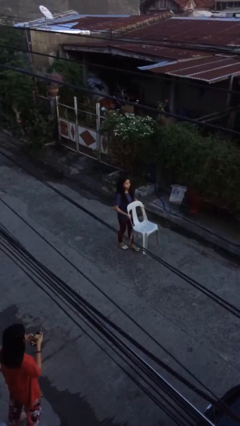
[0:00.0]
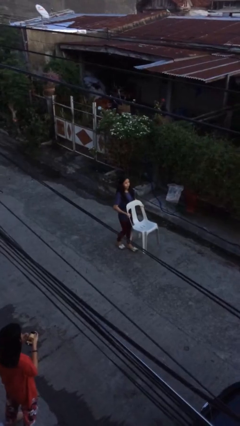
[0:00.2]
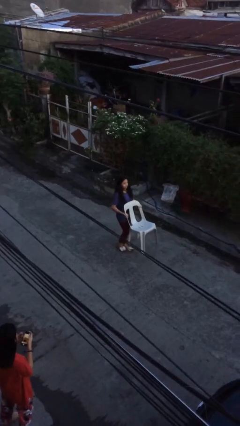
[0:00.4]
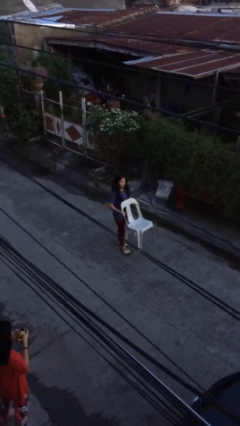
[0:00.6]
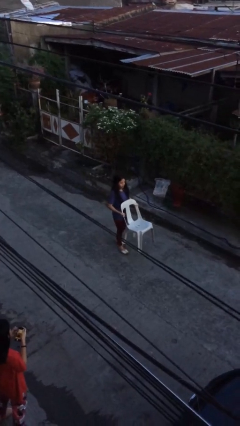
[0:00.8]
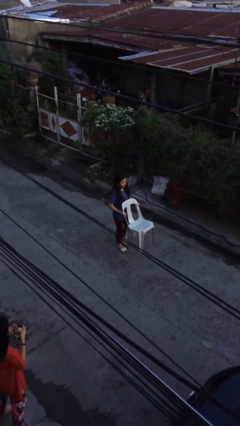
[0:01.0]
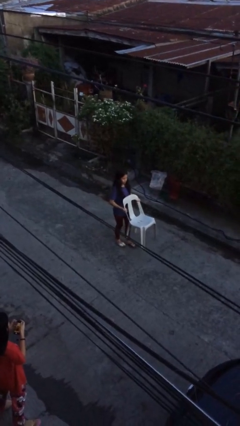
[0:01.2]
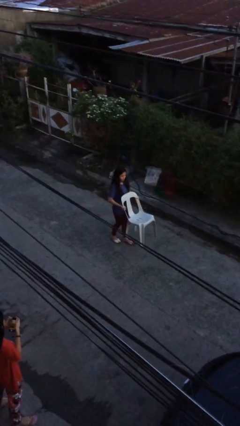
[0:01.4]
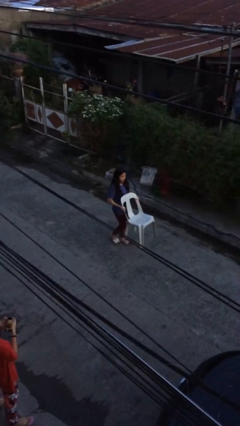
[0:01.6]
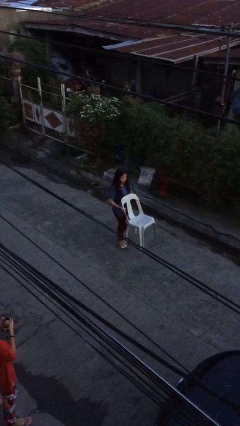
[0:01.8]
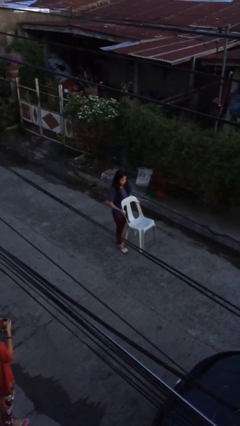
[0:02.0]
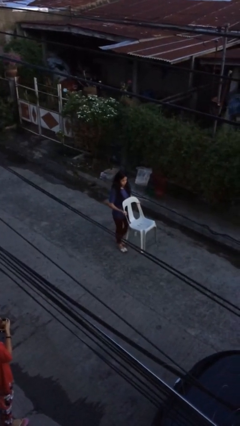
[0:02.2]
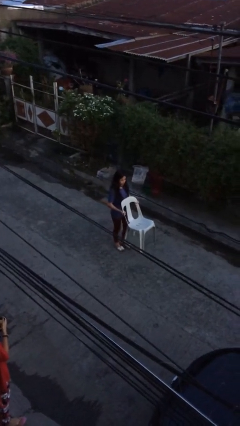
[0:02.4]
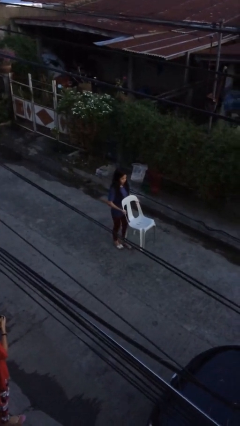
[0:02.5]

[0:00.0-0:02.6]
person carries heavy object

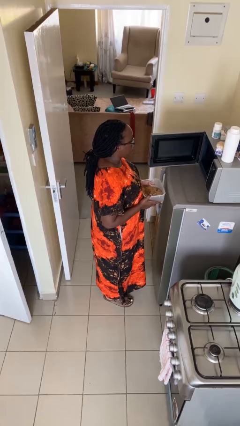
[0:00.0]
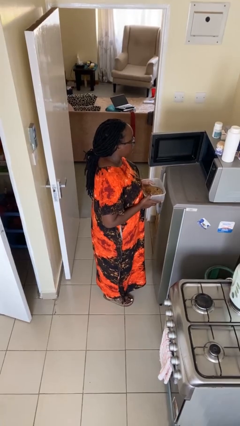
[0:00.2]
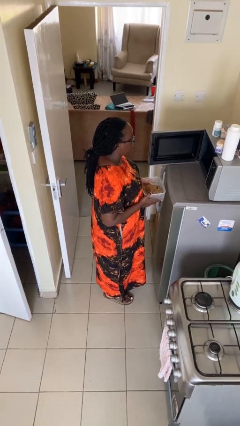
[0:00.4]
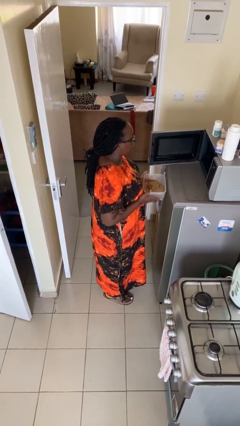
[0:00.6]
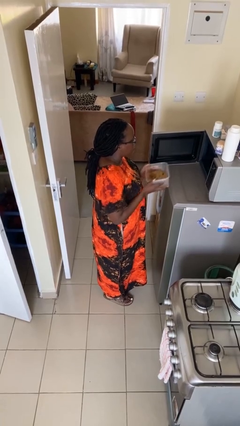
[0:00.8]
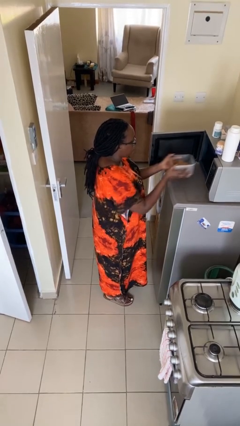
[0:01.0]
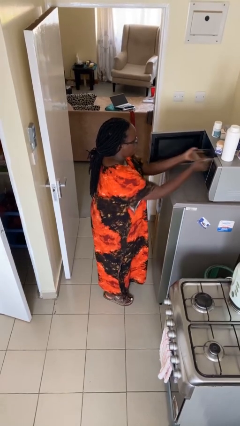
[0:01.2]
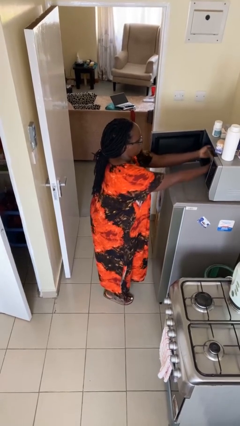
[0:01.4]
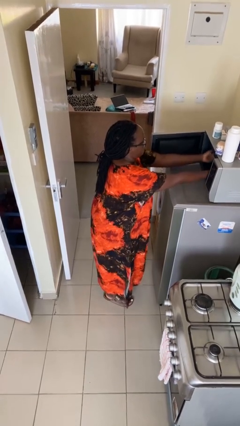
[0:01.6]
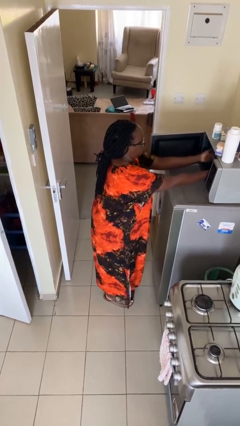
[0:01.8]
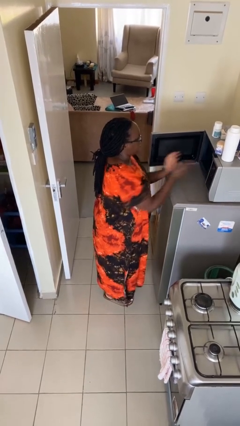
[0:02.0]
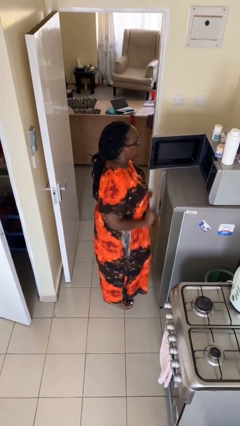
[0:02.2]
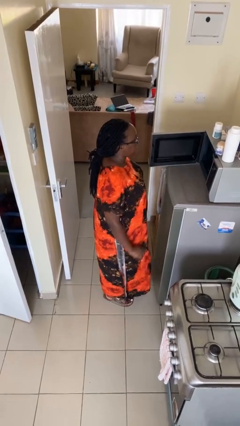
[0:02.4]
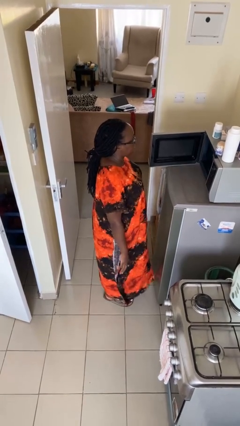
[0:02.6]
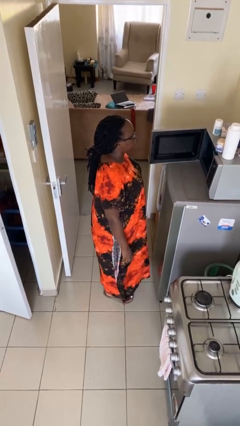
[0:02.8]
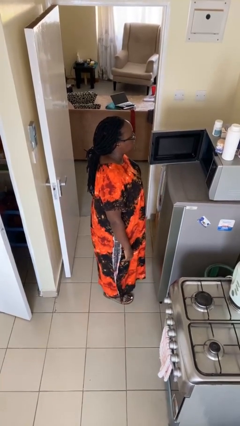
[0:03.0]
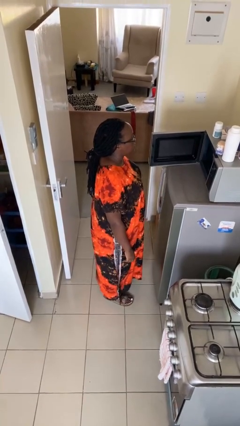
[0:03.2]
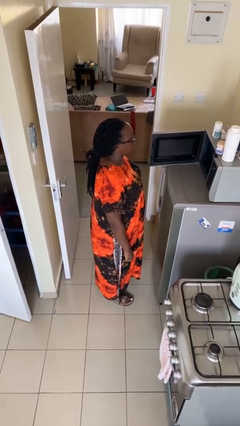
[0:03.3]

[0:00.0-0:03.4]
person puts object into microwave

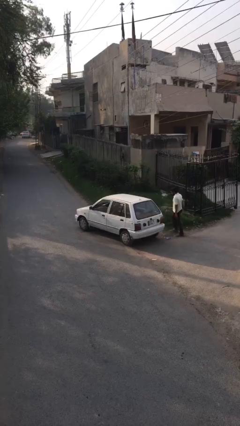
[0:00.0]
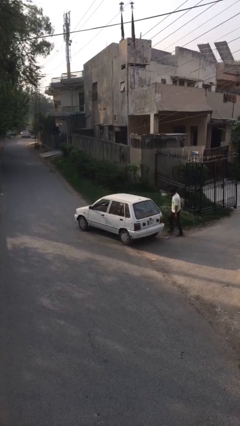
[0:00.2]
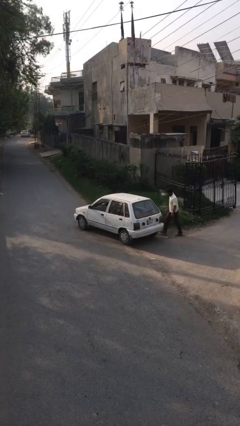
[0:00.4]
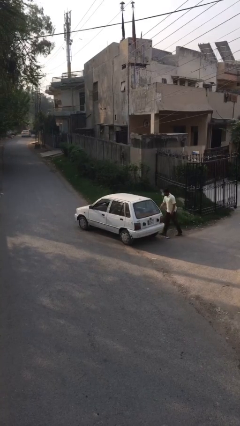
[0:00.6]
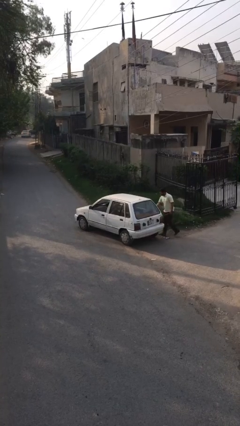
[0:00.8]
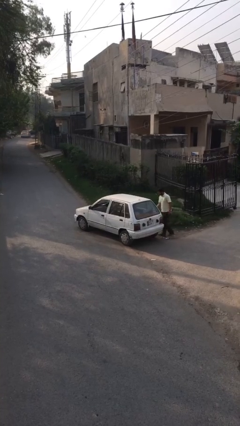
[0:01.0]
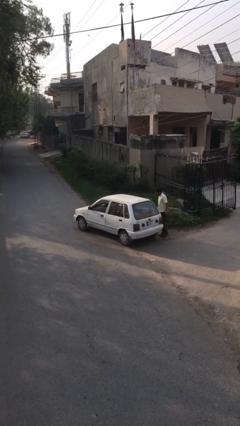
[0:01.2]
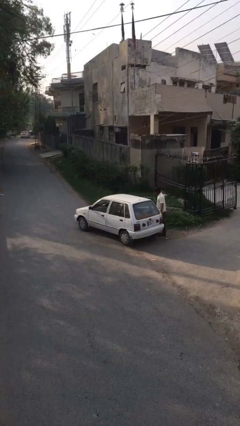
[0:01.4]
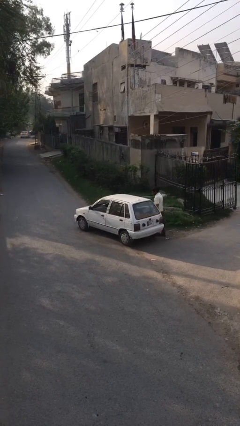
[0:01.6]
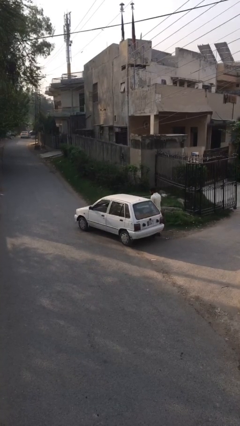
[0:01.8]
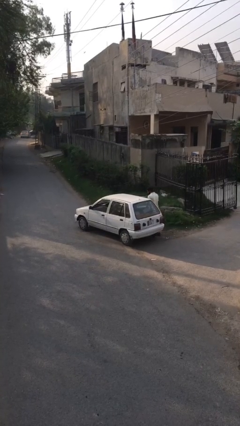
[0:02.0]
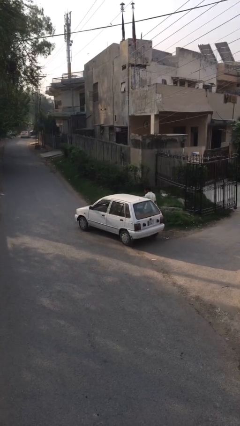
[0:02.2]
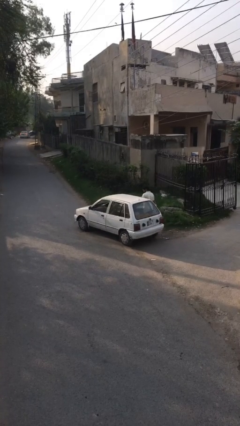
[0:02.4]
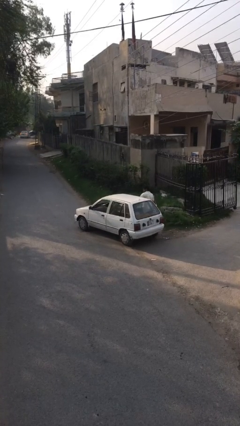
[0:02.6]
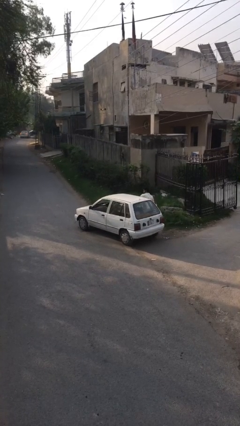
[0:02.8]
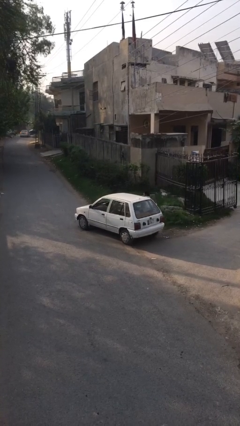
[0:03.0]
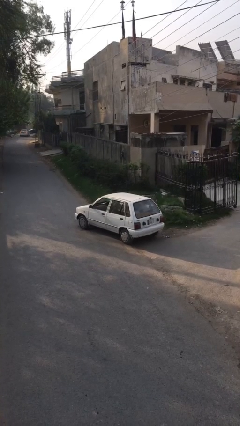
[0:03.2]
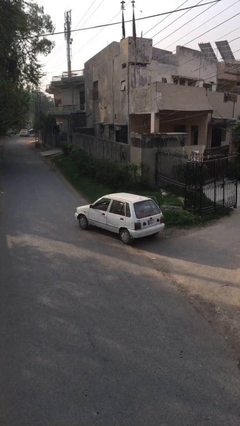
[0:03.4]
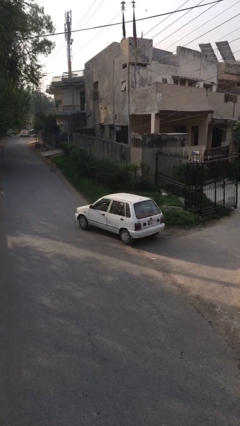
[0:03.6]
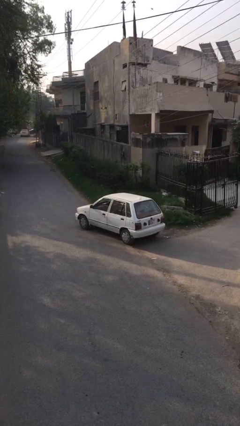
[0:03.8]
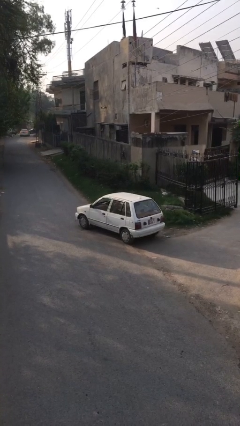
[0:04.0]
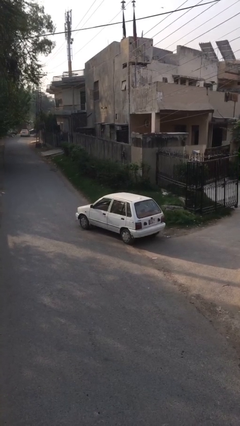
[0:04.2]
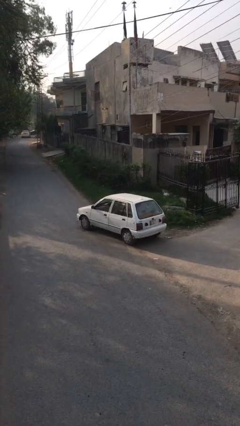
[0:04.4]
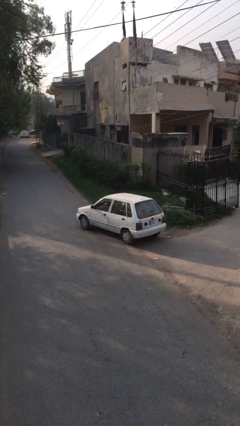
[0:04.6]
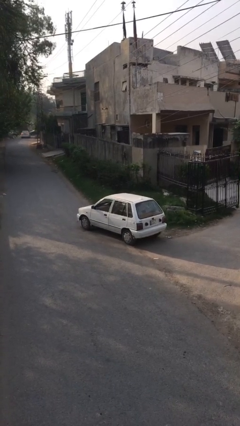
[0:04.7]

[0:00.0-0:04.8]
car picks up person

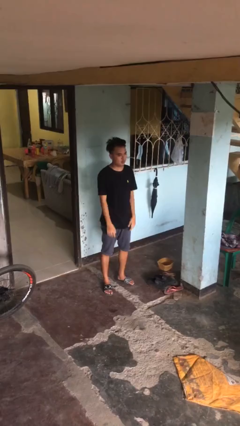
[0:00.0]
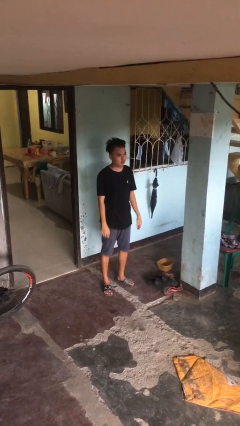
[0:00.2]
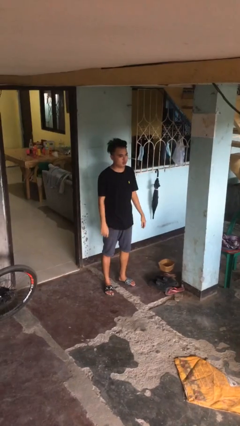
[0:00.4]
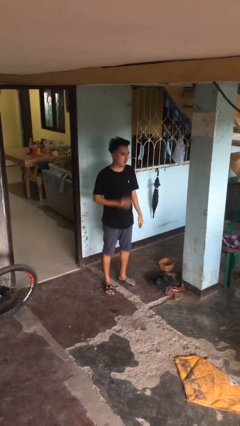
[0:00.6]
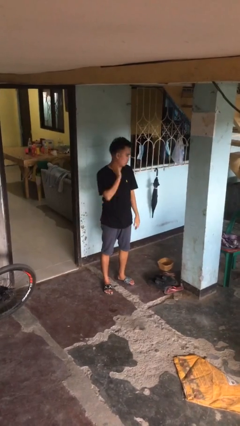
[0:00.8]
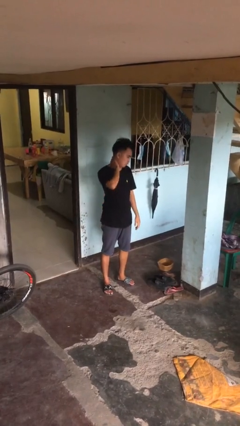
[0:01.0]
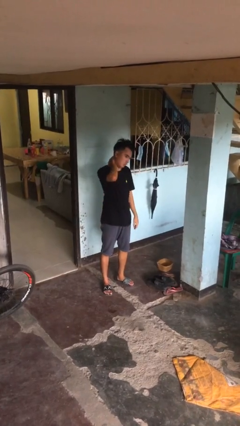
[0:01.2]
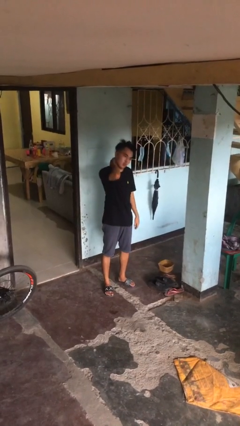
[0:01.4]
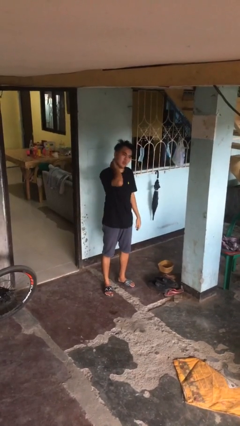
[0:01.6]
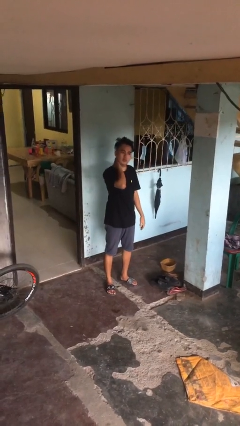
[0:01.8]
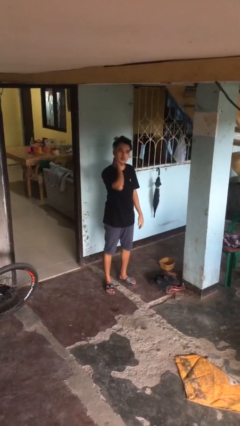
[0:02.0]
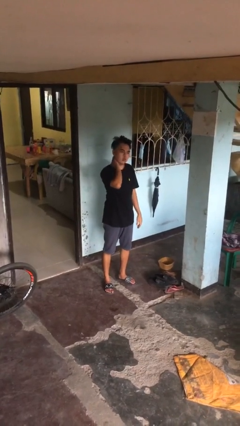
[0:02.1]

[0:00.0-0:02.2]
person rubs neck

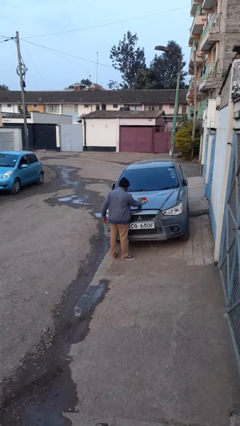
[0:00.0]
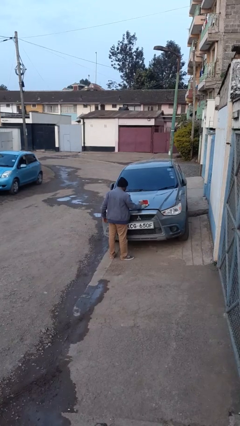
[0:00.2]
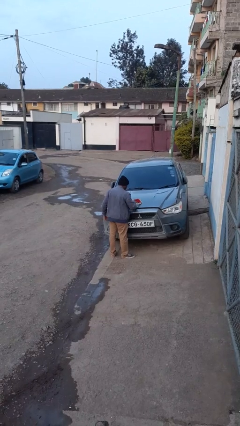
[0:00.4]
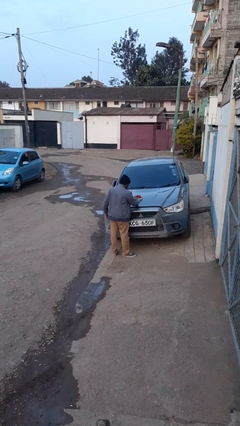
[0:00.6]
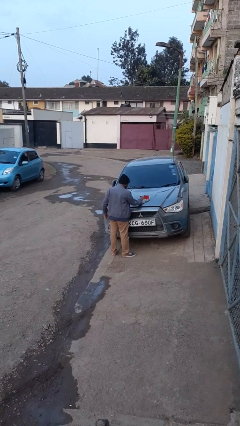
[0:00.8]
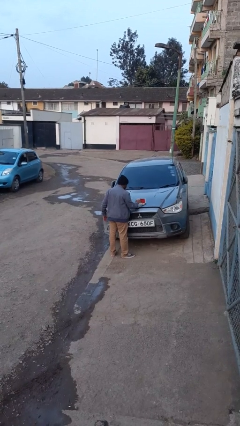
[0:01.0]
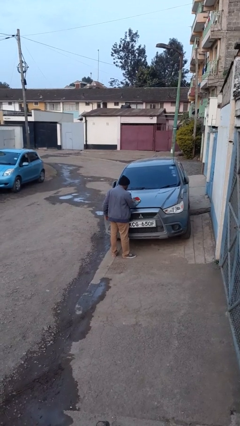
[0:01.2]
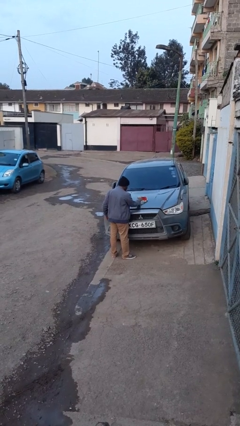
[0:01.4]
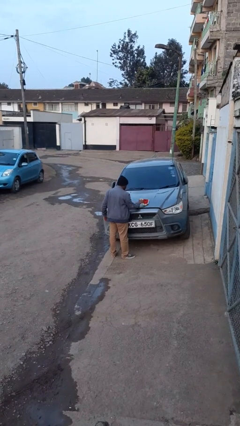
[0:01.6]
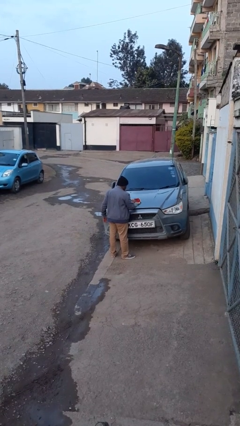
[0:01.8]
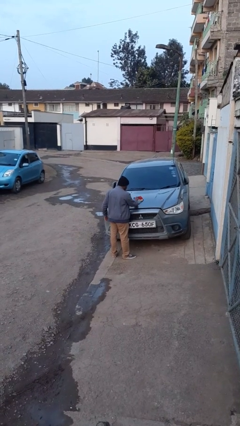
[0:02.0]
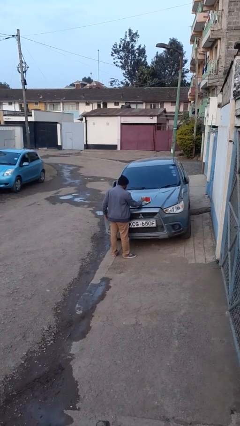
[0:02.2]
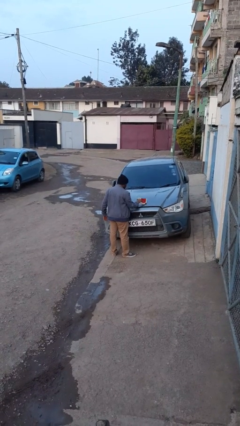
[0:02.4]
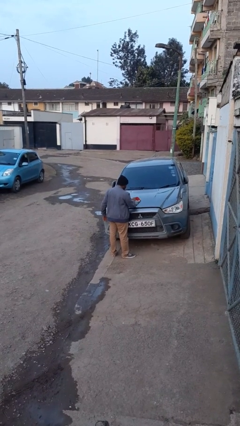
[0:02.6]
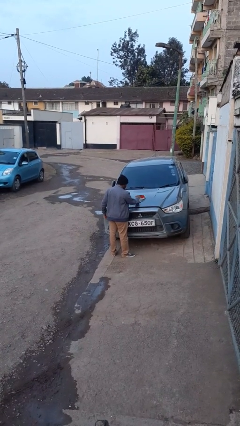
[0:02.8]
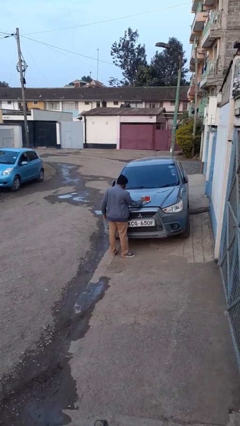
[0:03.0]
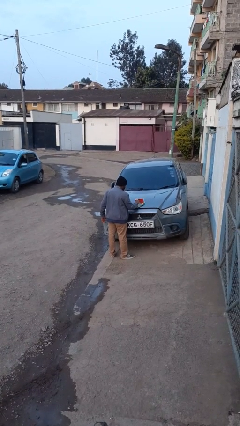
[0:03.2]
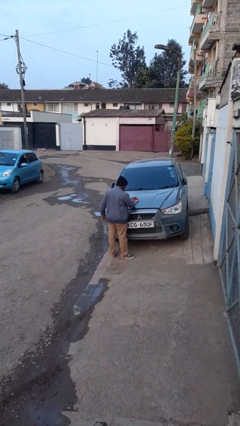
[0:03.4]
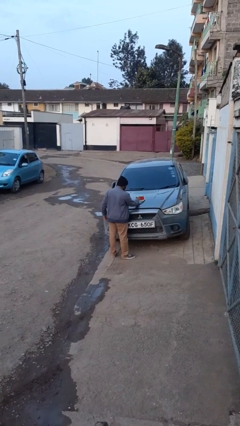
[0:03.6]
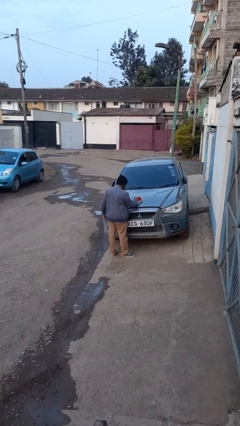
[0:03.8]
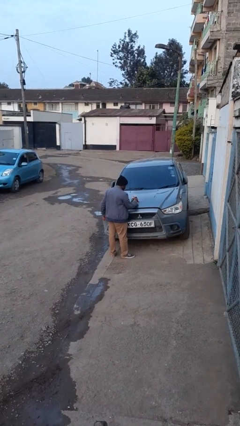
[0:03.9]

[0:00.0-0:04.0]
person polishes car with rag

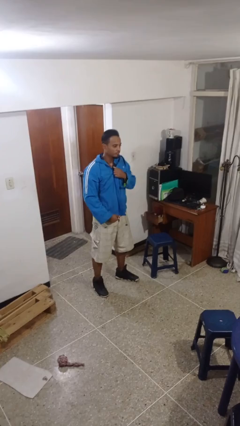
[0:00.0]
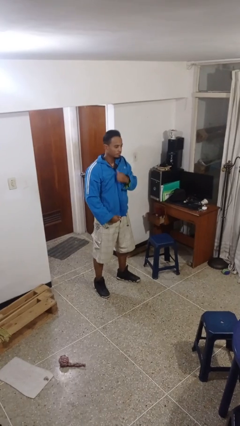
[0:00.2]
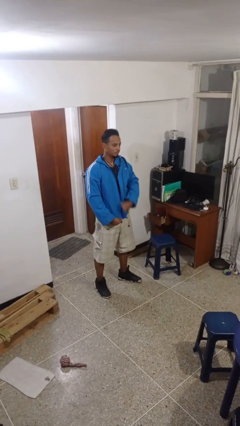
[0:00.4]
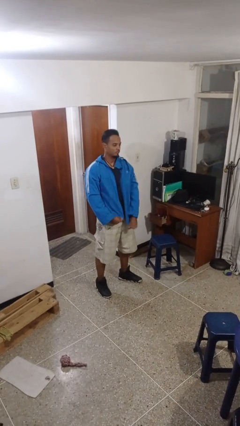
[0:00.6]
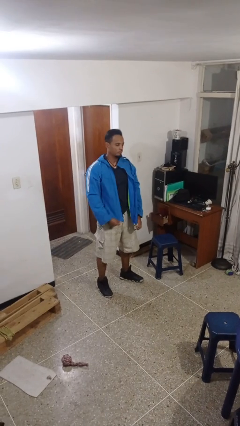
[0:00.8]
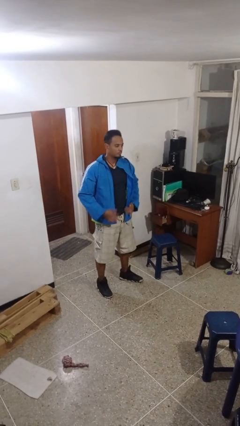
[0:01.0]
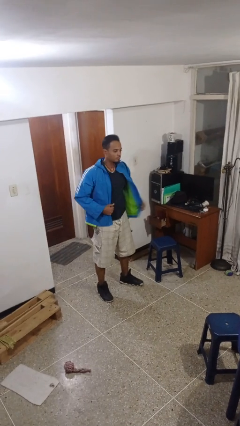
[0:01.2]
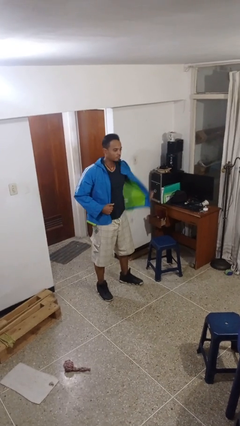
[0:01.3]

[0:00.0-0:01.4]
person unzips jacket
